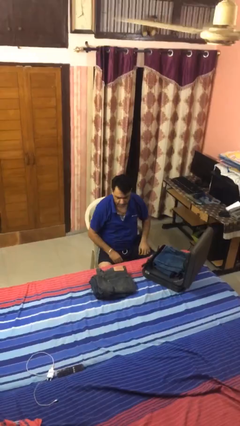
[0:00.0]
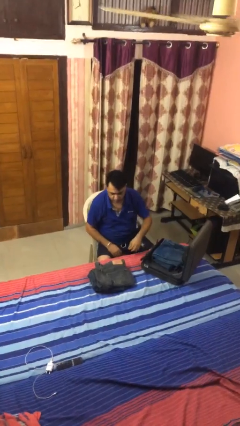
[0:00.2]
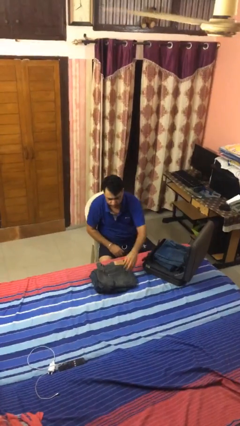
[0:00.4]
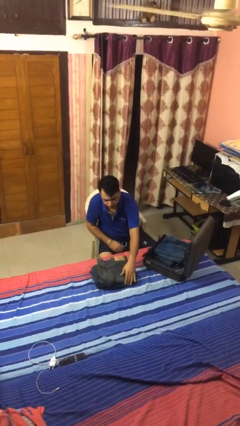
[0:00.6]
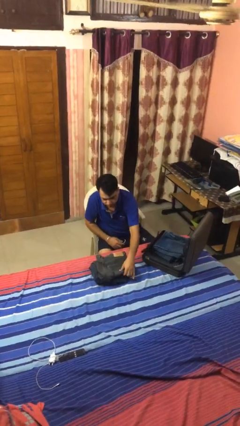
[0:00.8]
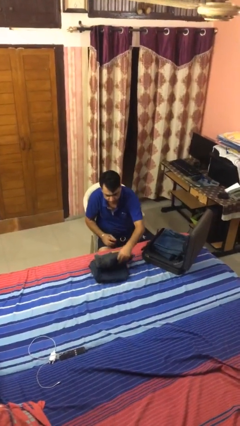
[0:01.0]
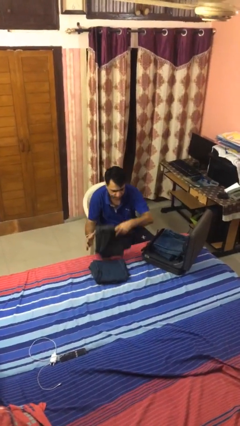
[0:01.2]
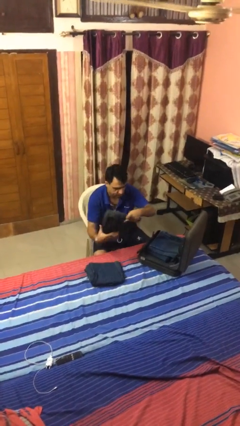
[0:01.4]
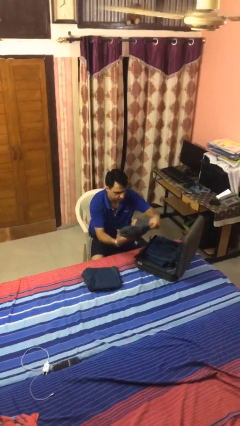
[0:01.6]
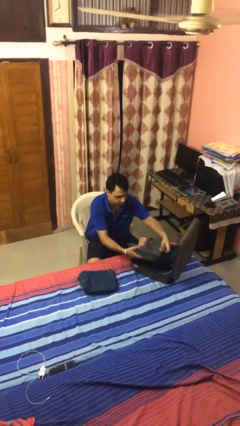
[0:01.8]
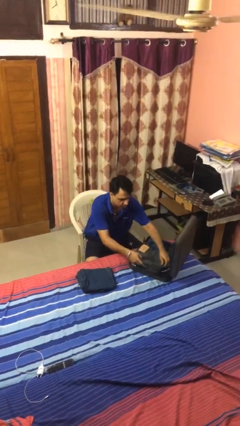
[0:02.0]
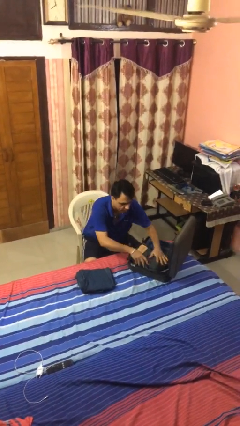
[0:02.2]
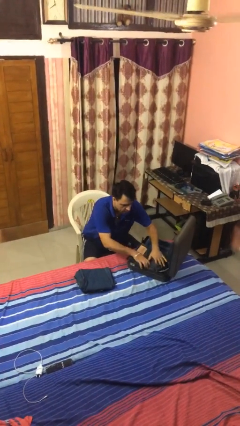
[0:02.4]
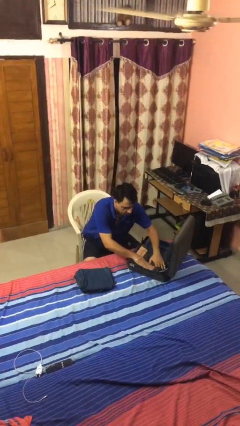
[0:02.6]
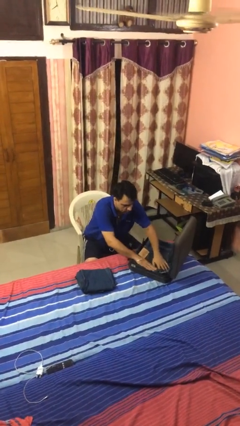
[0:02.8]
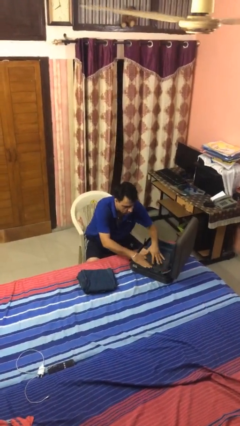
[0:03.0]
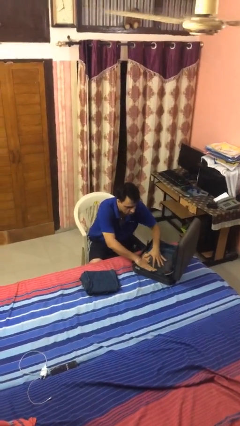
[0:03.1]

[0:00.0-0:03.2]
person loads clothes into suitcase

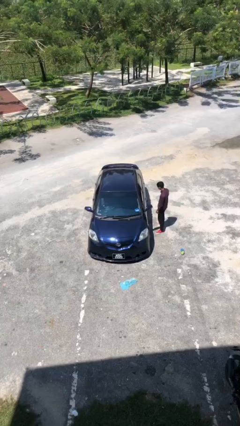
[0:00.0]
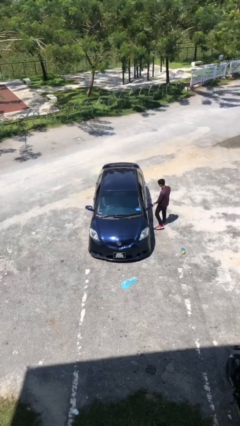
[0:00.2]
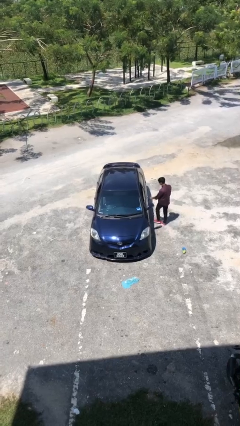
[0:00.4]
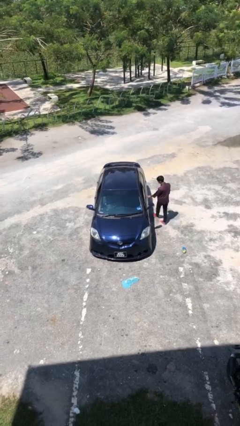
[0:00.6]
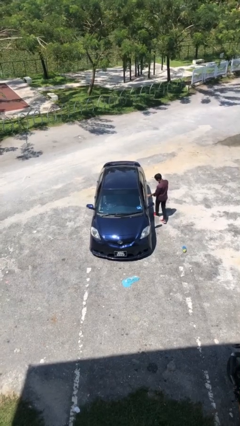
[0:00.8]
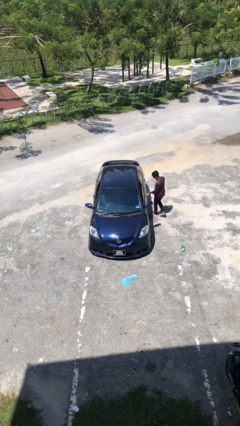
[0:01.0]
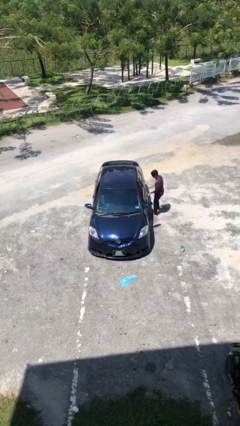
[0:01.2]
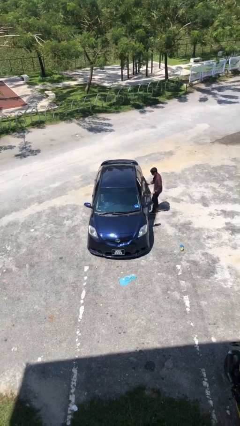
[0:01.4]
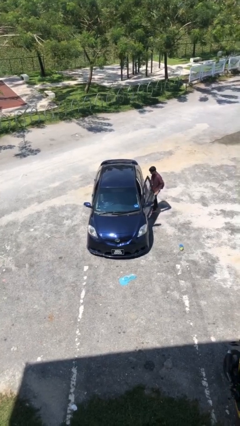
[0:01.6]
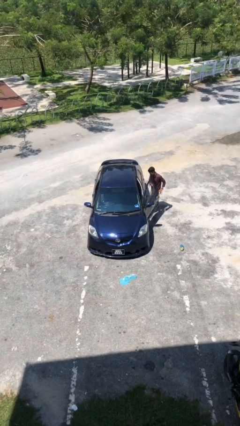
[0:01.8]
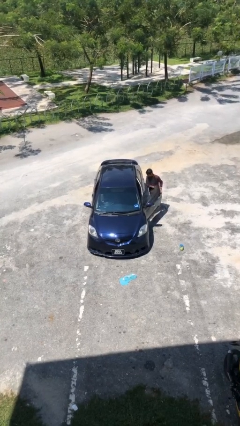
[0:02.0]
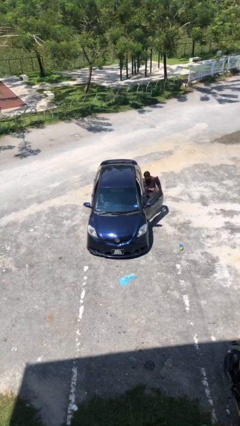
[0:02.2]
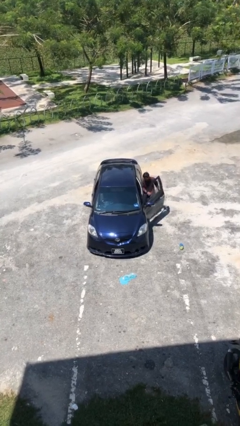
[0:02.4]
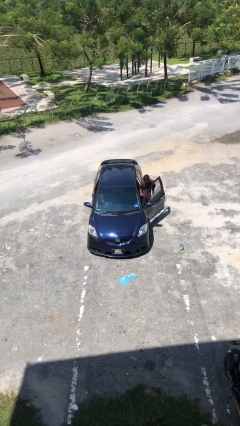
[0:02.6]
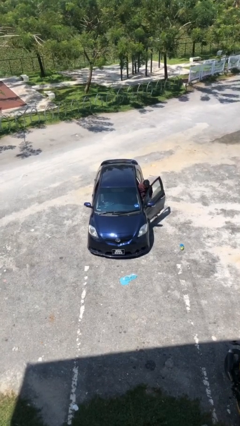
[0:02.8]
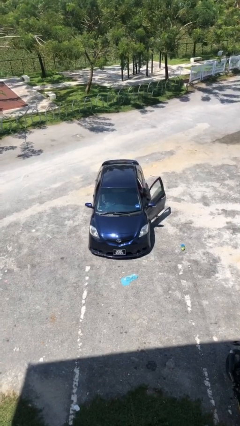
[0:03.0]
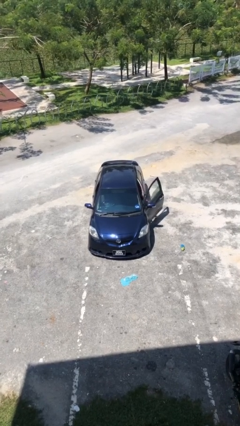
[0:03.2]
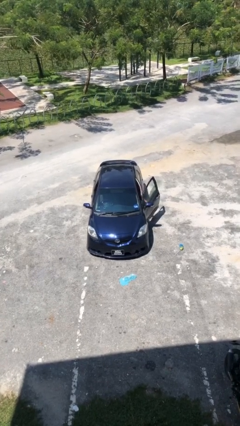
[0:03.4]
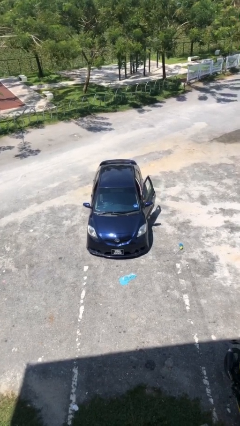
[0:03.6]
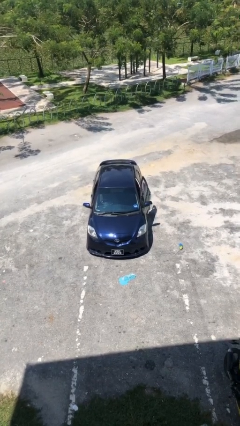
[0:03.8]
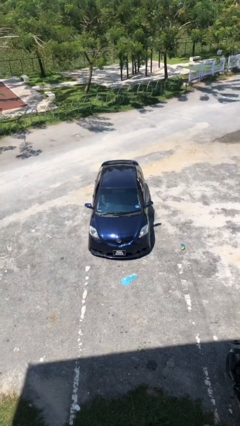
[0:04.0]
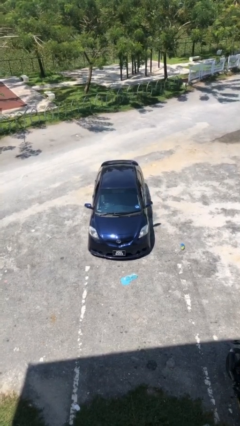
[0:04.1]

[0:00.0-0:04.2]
car picks up person

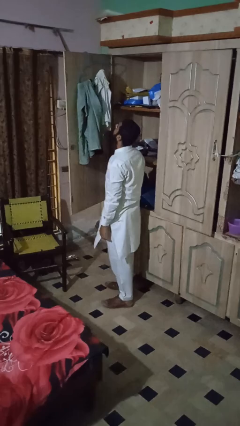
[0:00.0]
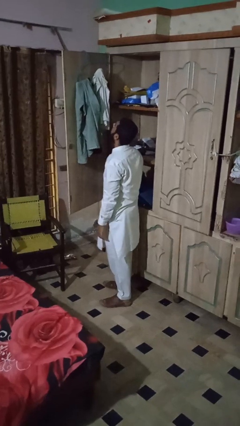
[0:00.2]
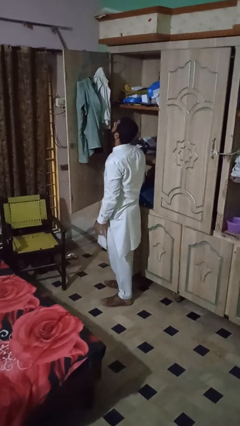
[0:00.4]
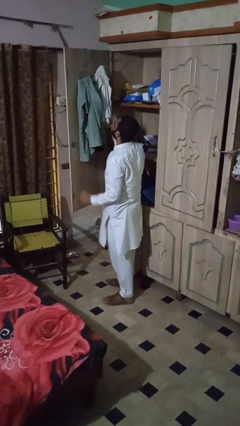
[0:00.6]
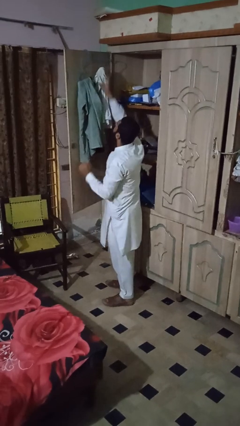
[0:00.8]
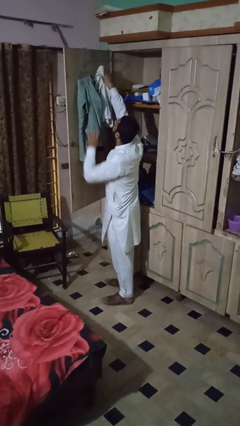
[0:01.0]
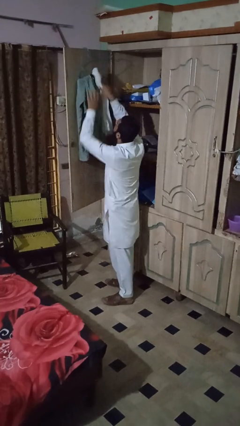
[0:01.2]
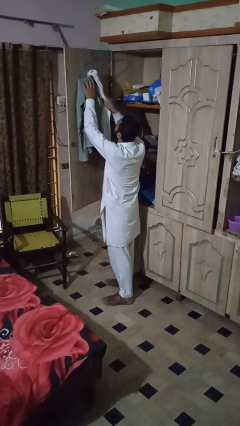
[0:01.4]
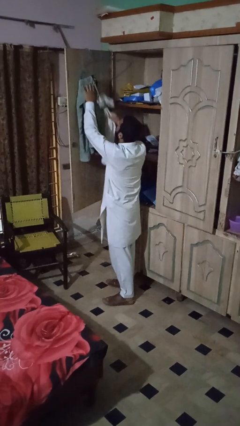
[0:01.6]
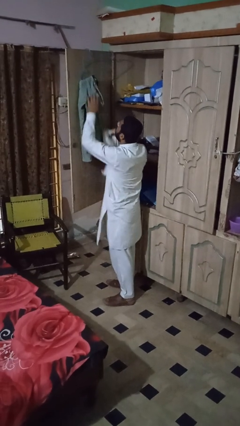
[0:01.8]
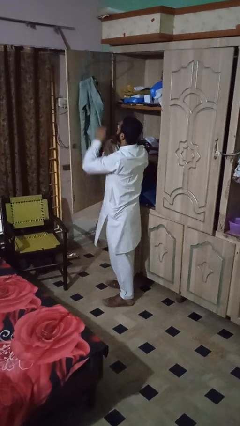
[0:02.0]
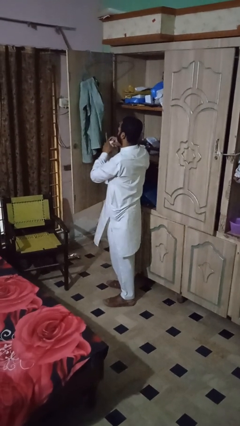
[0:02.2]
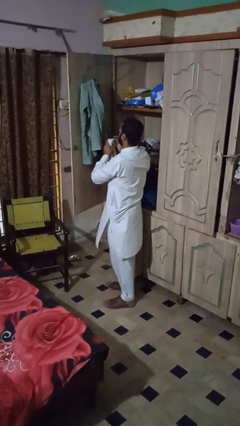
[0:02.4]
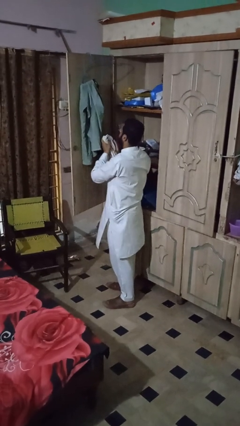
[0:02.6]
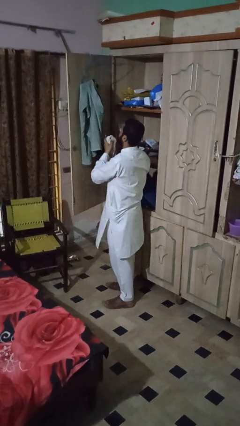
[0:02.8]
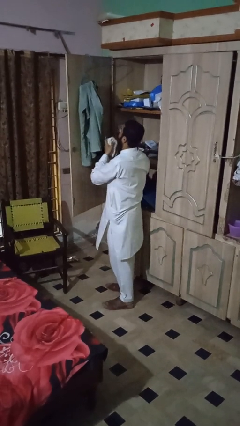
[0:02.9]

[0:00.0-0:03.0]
person takes clothes from closet

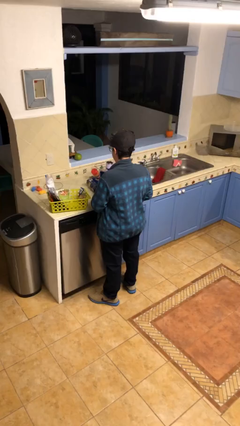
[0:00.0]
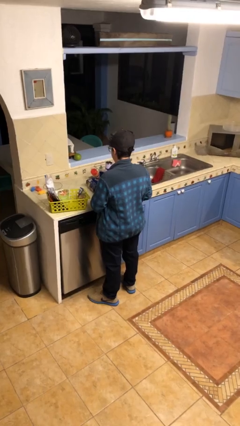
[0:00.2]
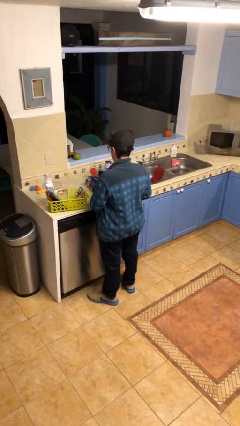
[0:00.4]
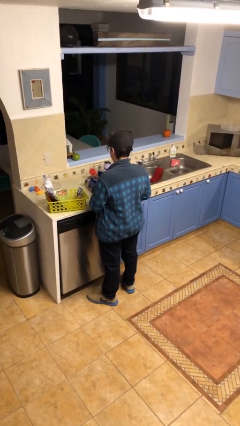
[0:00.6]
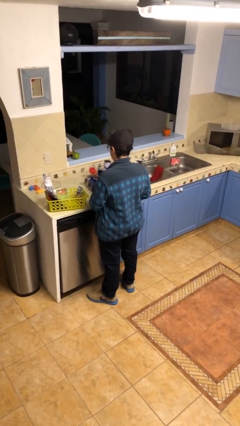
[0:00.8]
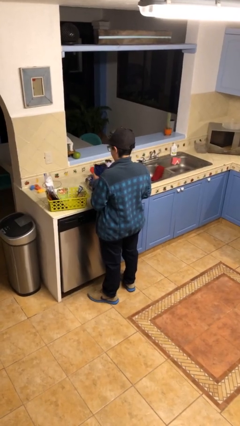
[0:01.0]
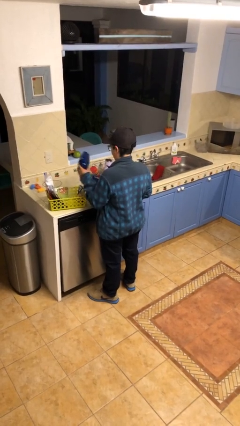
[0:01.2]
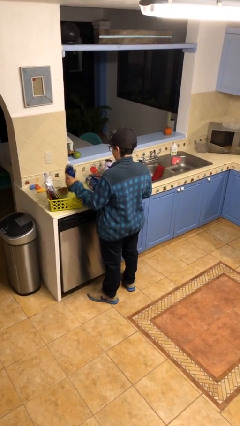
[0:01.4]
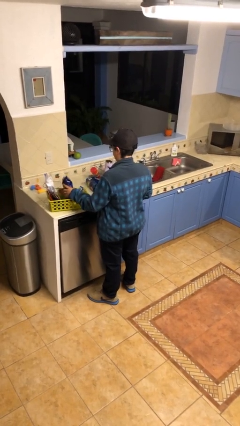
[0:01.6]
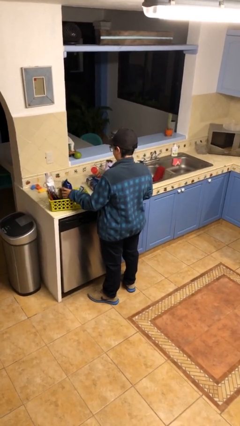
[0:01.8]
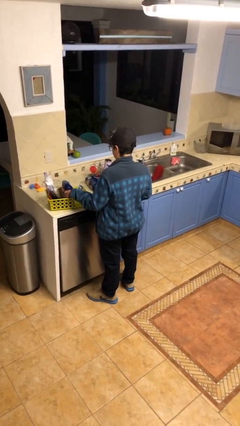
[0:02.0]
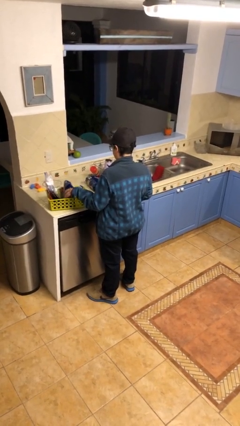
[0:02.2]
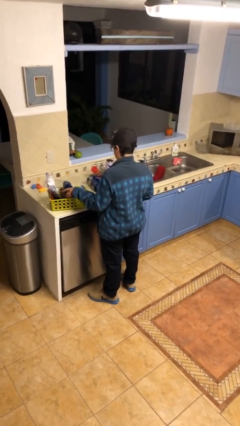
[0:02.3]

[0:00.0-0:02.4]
person puts object into basket

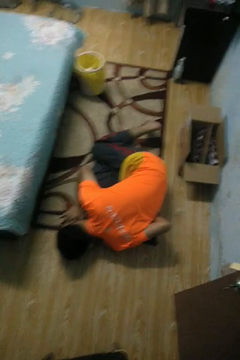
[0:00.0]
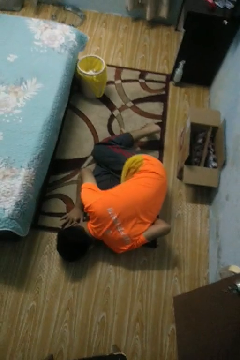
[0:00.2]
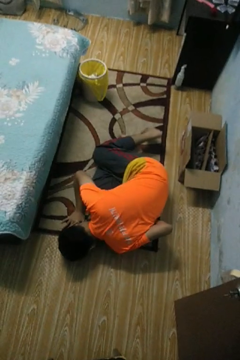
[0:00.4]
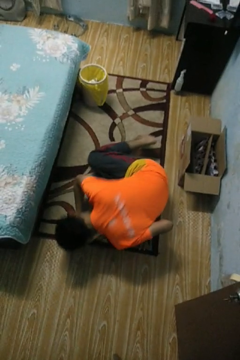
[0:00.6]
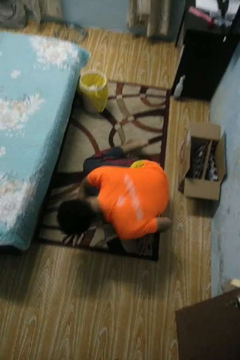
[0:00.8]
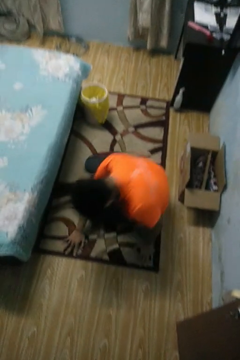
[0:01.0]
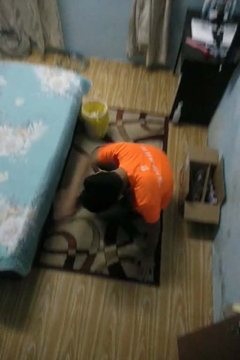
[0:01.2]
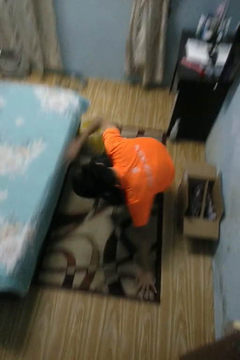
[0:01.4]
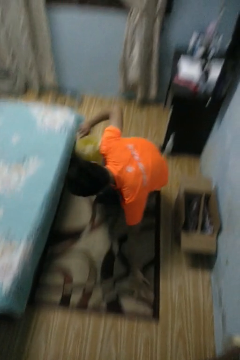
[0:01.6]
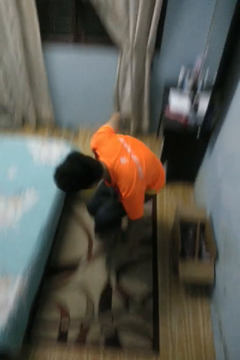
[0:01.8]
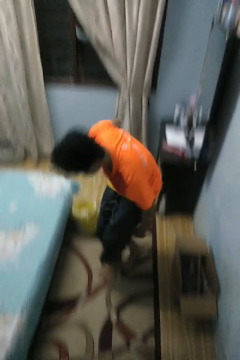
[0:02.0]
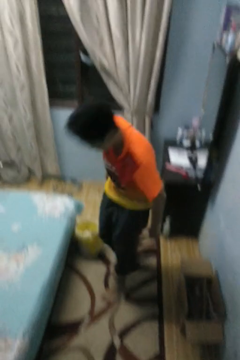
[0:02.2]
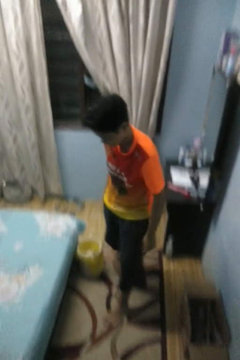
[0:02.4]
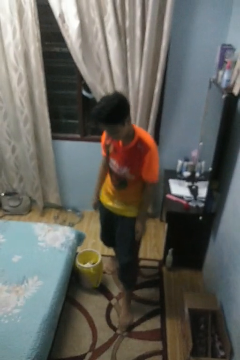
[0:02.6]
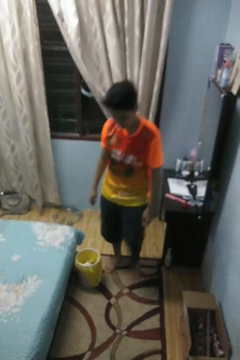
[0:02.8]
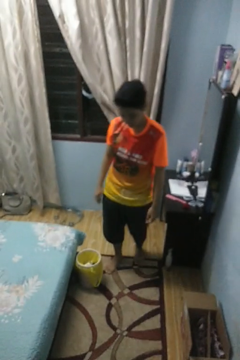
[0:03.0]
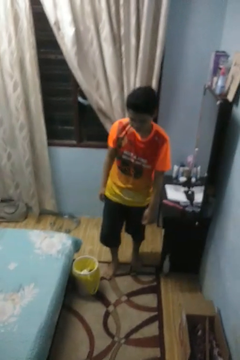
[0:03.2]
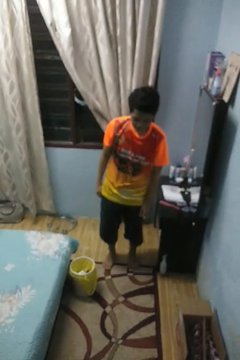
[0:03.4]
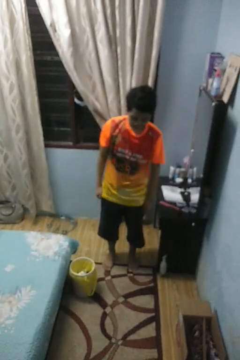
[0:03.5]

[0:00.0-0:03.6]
person stands up from floor

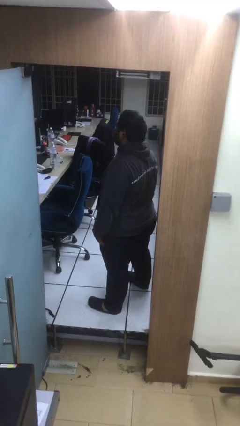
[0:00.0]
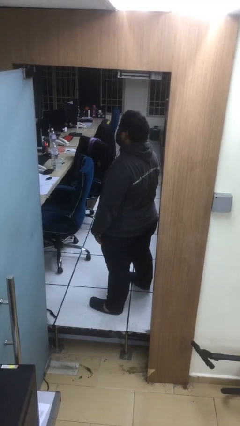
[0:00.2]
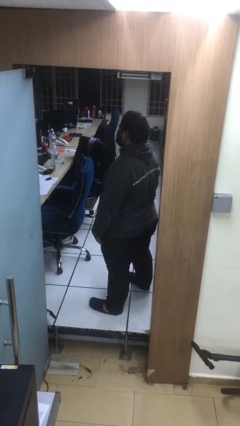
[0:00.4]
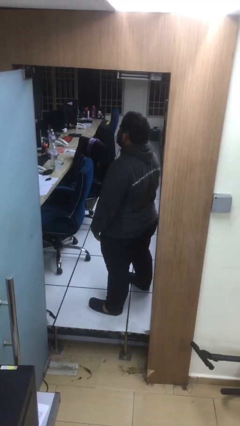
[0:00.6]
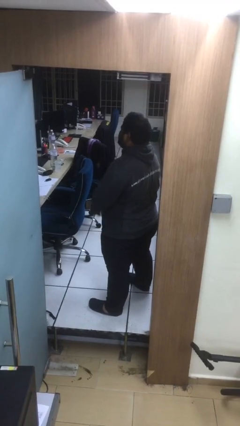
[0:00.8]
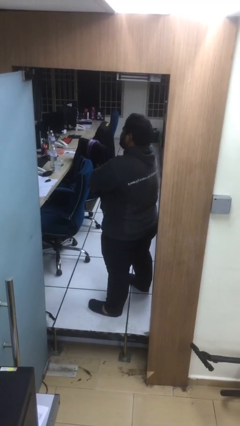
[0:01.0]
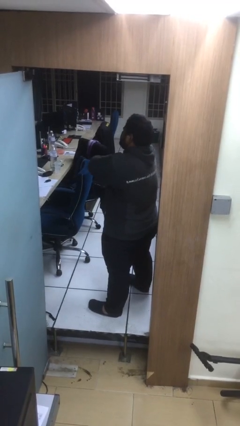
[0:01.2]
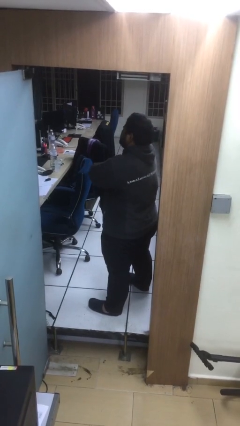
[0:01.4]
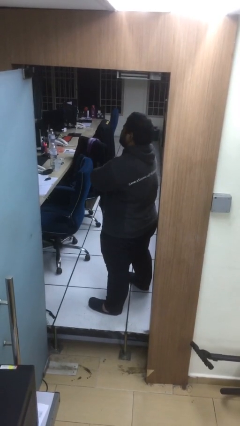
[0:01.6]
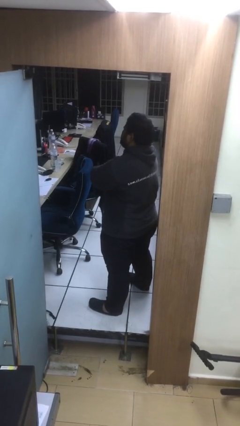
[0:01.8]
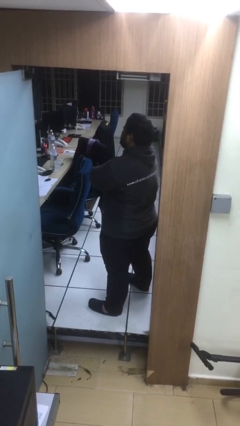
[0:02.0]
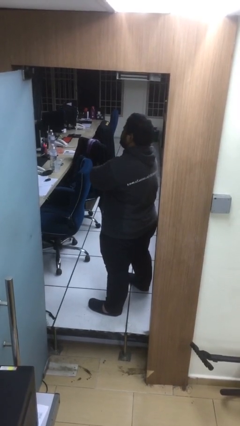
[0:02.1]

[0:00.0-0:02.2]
person crosses arms
